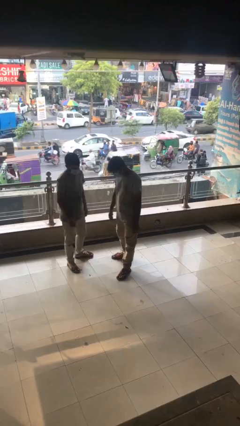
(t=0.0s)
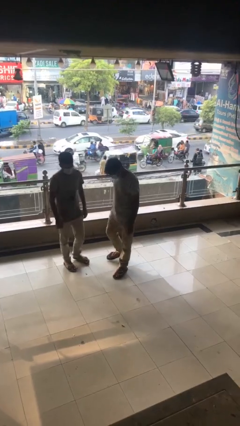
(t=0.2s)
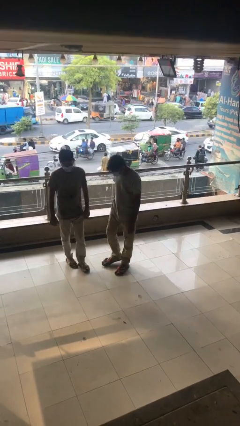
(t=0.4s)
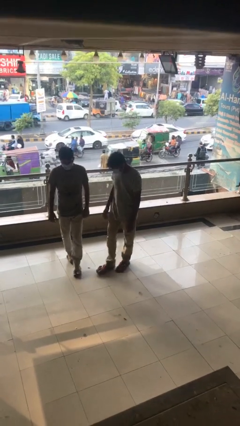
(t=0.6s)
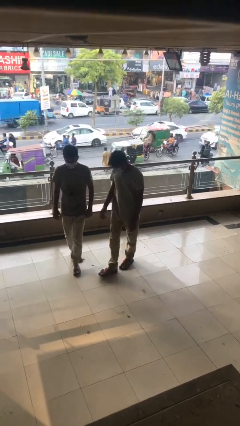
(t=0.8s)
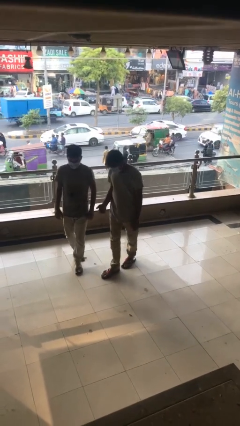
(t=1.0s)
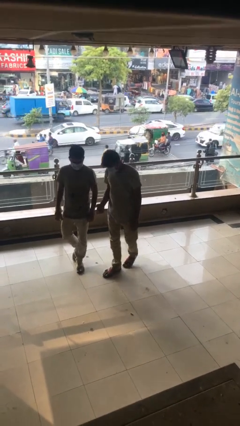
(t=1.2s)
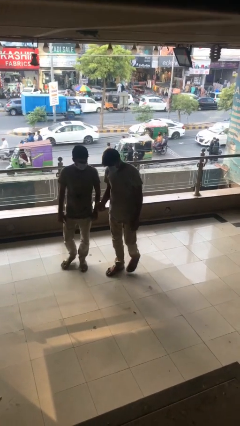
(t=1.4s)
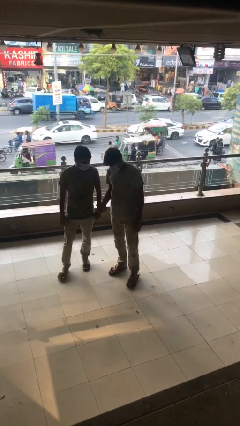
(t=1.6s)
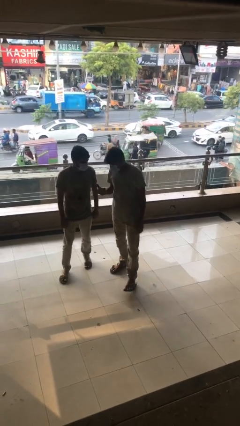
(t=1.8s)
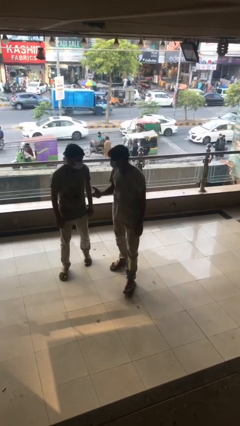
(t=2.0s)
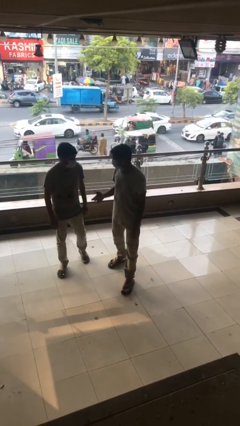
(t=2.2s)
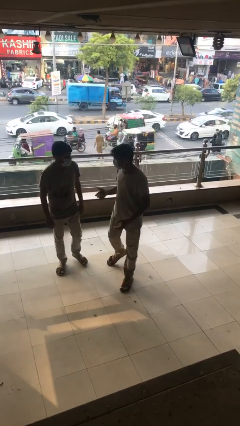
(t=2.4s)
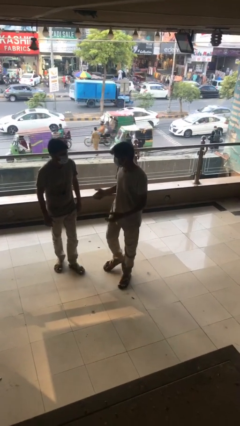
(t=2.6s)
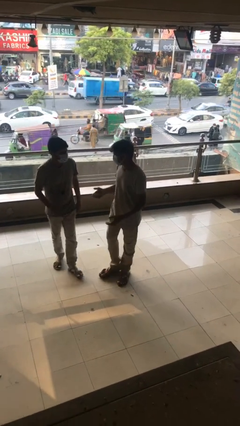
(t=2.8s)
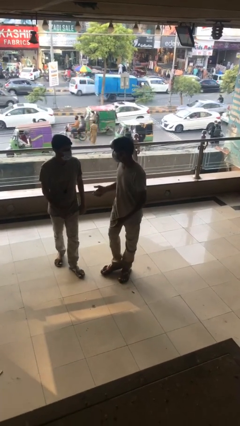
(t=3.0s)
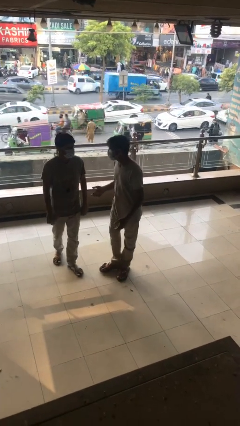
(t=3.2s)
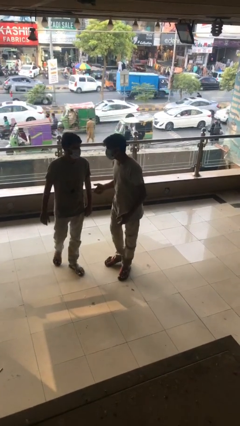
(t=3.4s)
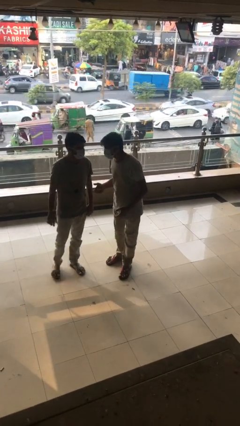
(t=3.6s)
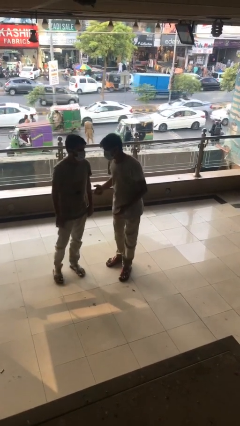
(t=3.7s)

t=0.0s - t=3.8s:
person talks to person

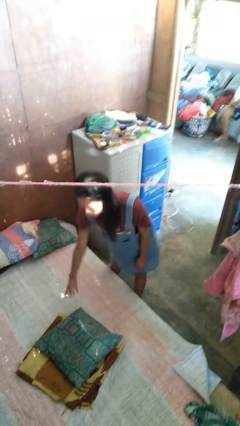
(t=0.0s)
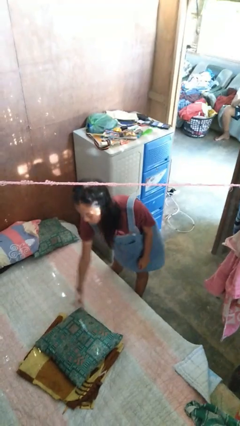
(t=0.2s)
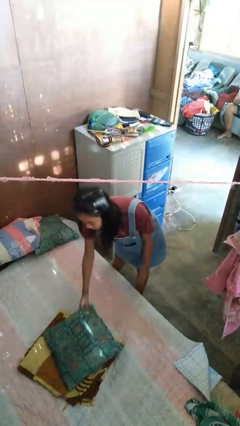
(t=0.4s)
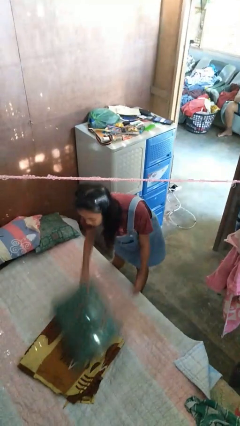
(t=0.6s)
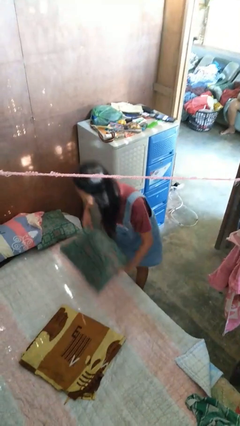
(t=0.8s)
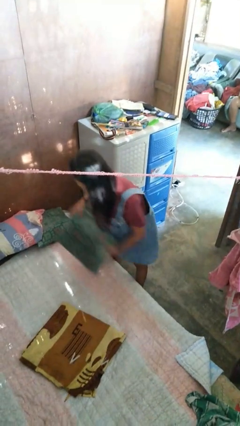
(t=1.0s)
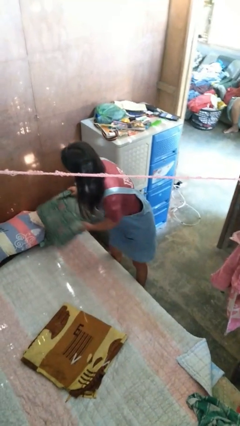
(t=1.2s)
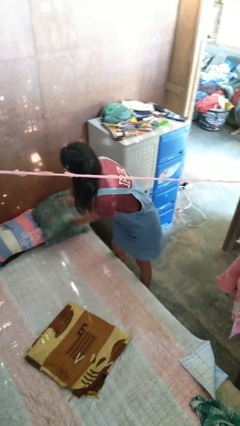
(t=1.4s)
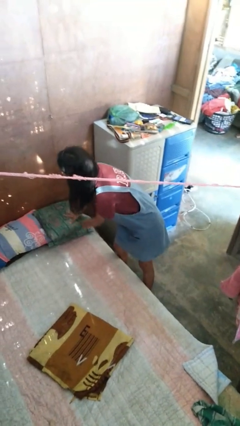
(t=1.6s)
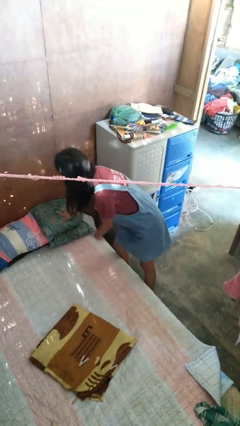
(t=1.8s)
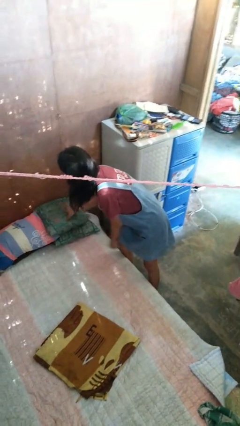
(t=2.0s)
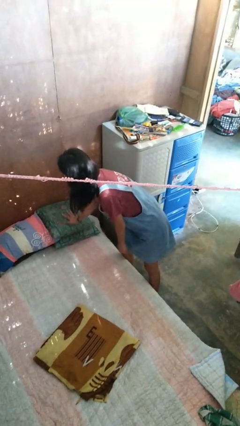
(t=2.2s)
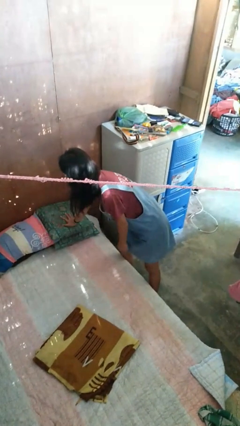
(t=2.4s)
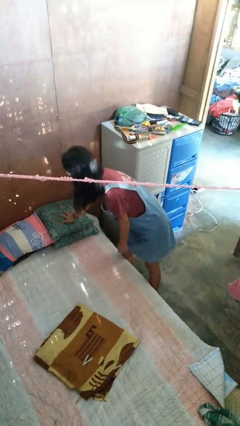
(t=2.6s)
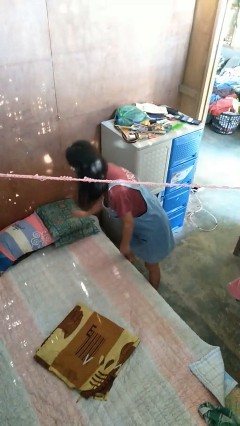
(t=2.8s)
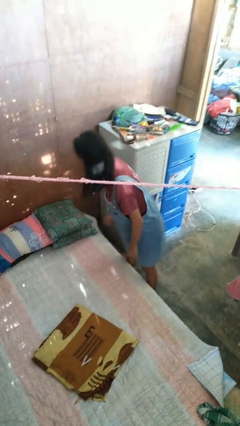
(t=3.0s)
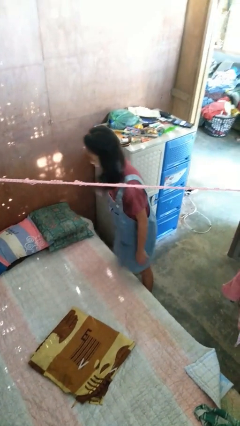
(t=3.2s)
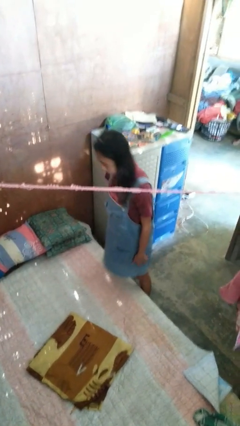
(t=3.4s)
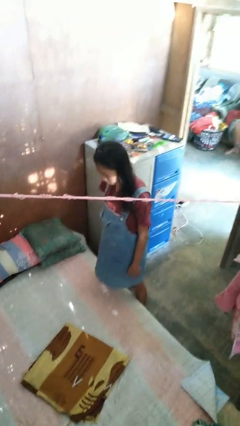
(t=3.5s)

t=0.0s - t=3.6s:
person makes bed

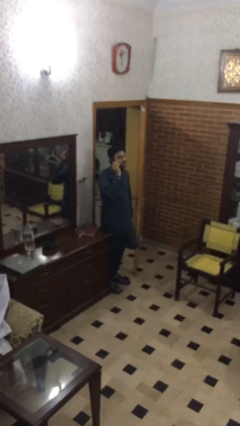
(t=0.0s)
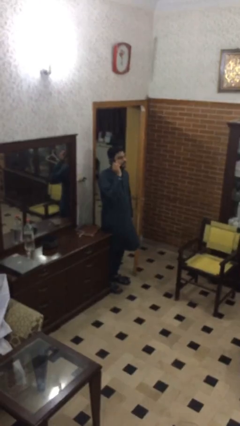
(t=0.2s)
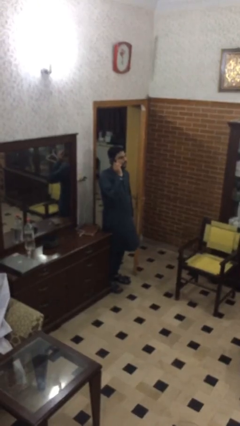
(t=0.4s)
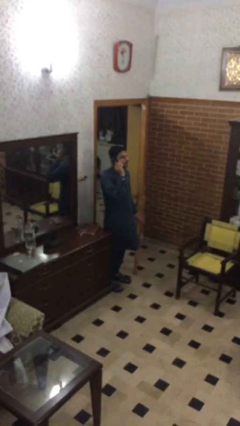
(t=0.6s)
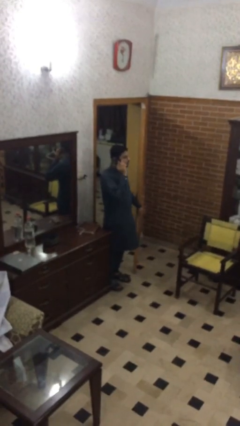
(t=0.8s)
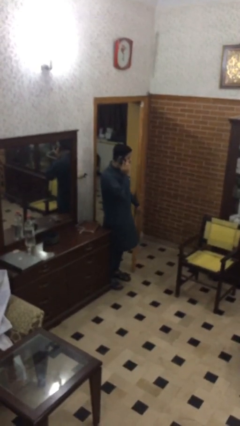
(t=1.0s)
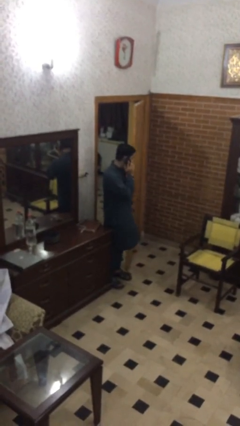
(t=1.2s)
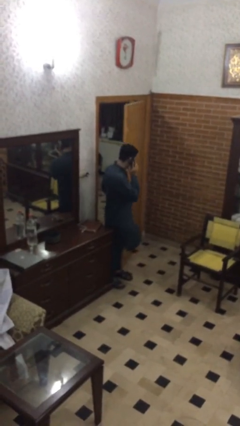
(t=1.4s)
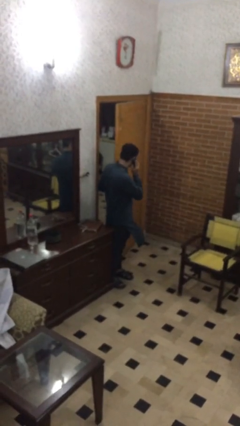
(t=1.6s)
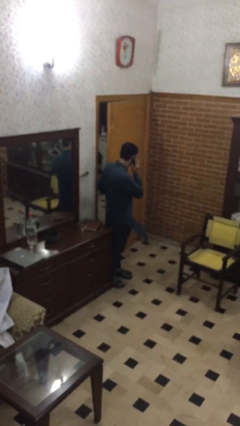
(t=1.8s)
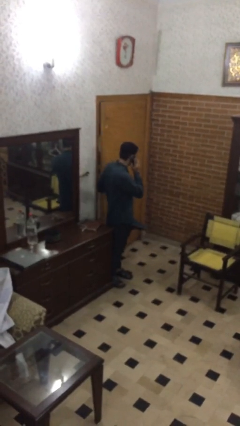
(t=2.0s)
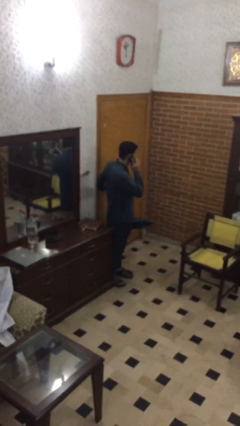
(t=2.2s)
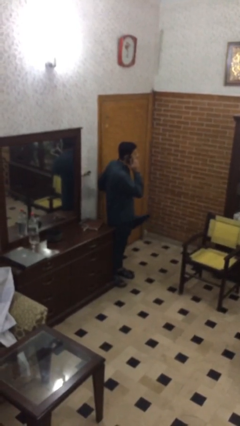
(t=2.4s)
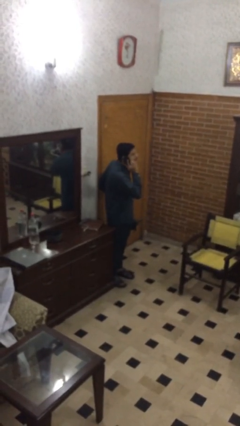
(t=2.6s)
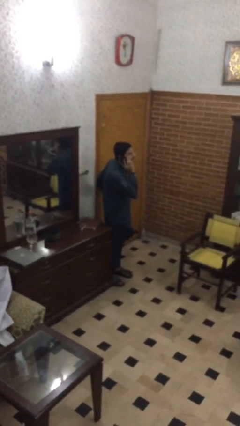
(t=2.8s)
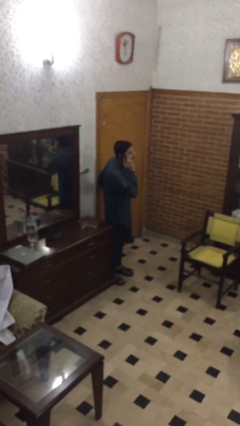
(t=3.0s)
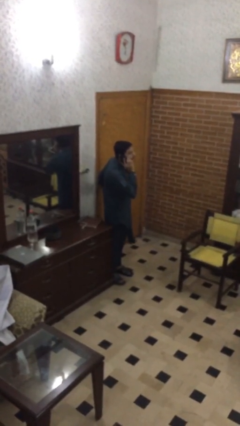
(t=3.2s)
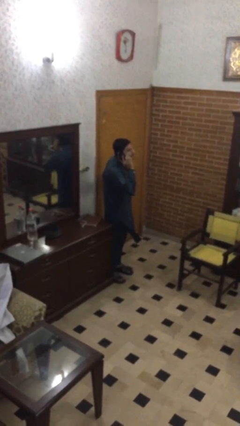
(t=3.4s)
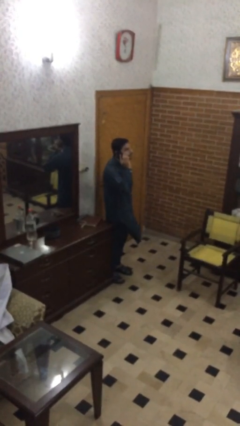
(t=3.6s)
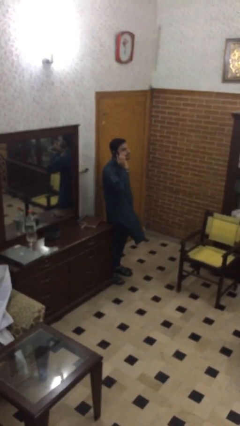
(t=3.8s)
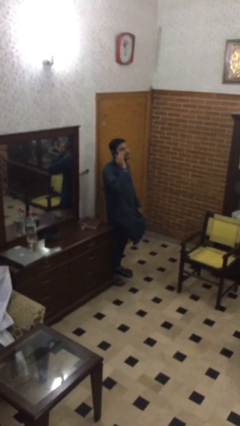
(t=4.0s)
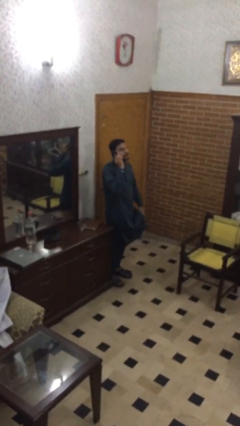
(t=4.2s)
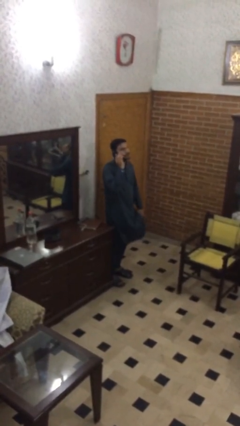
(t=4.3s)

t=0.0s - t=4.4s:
person closes facility door

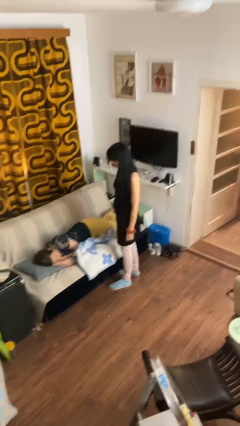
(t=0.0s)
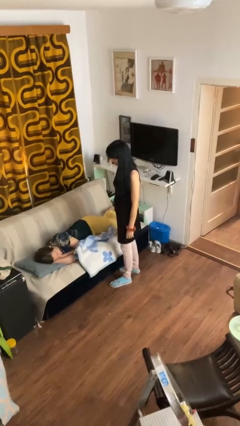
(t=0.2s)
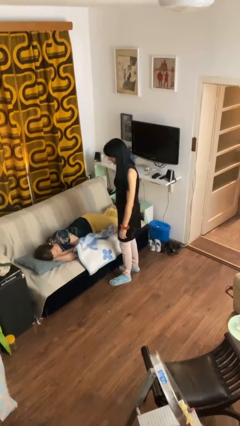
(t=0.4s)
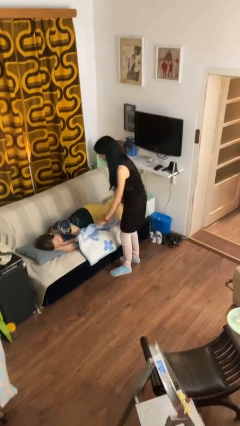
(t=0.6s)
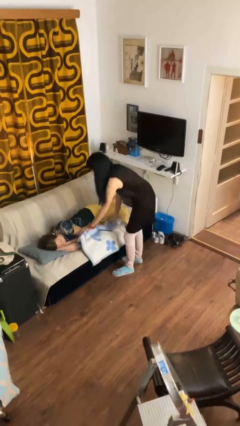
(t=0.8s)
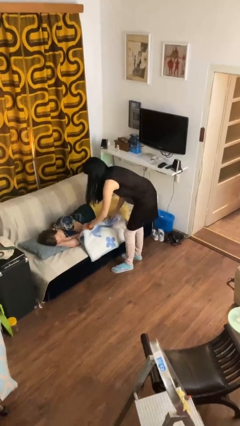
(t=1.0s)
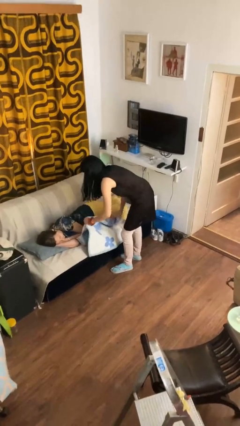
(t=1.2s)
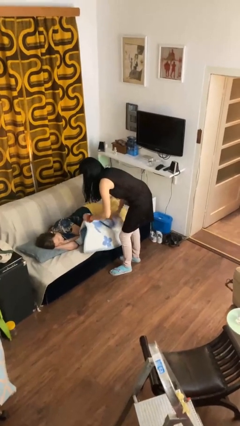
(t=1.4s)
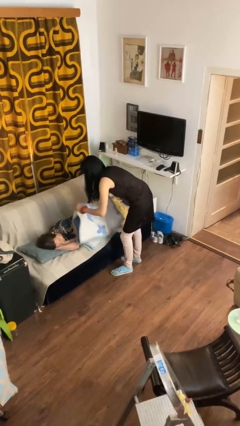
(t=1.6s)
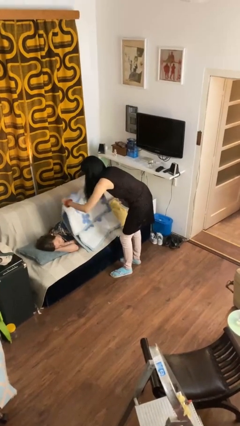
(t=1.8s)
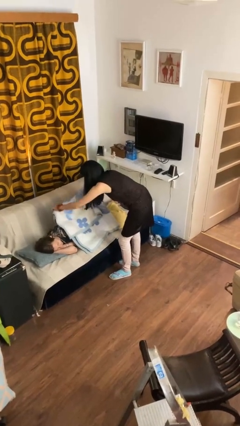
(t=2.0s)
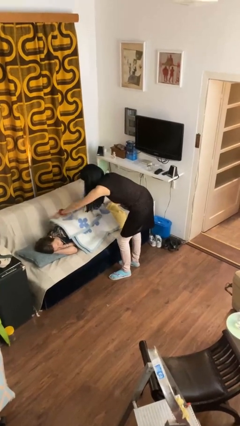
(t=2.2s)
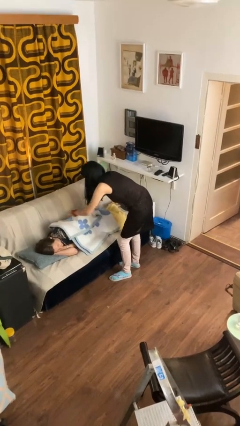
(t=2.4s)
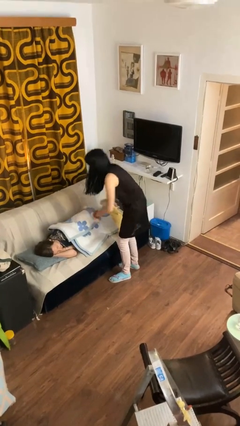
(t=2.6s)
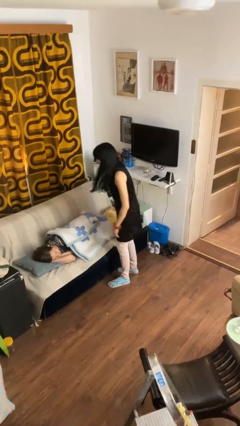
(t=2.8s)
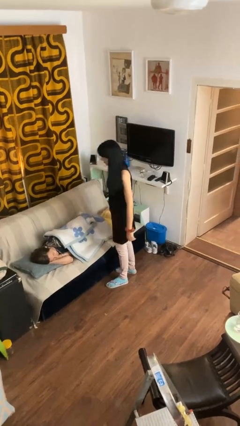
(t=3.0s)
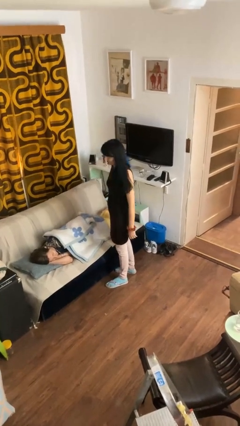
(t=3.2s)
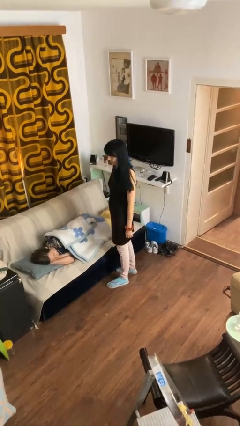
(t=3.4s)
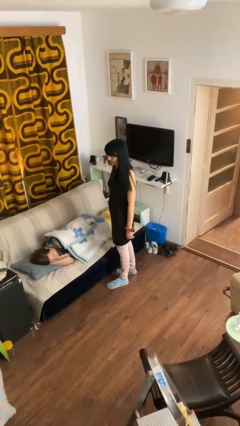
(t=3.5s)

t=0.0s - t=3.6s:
person covers friend with blanket

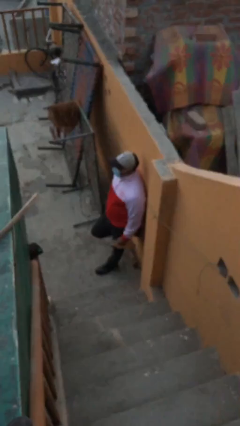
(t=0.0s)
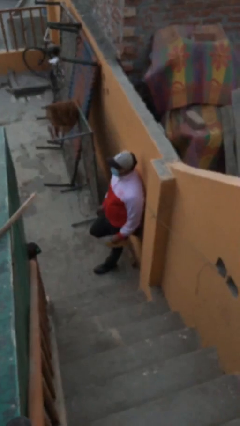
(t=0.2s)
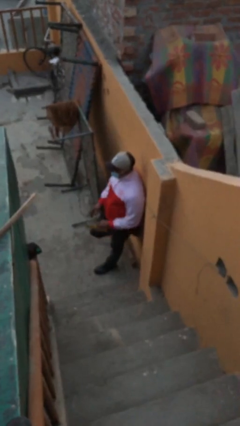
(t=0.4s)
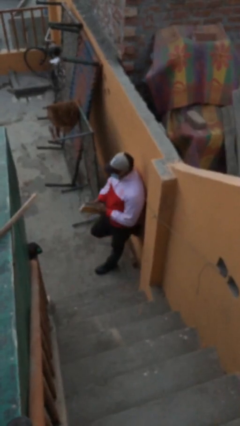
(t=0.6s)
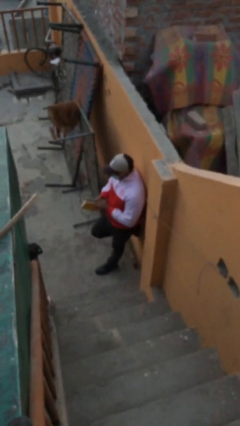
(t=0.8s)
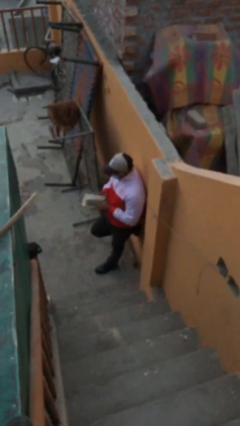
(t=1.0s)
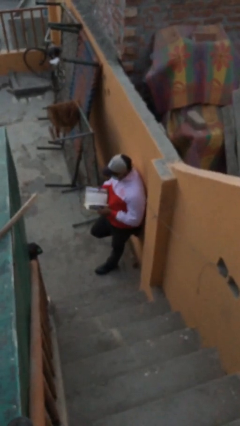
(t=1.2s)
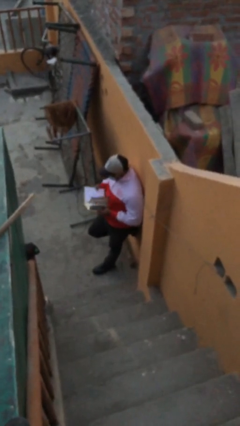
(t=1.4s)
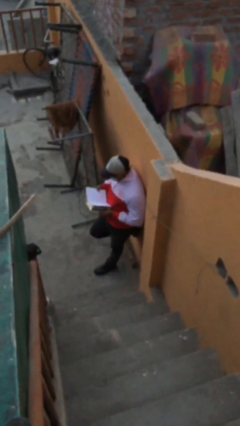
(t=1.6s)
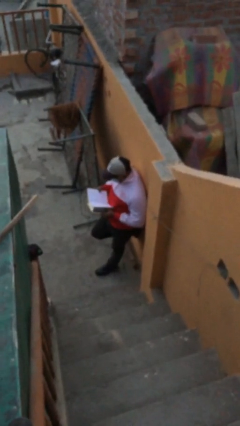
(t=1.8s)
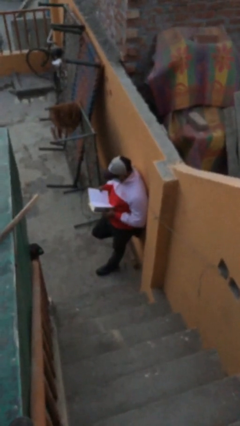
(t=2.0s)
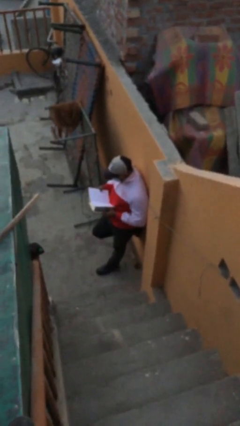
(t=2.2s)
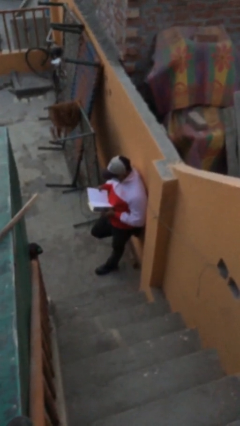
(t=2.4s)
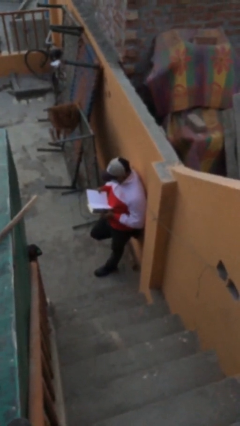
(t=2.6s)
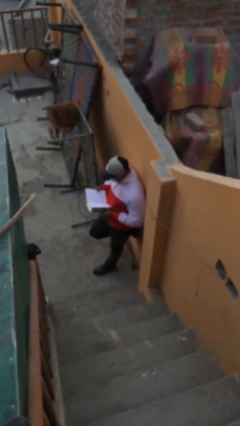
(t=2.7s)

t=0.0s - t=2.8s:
person reads document
